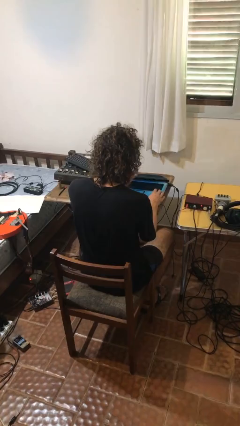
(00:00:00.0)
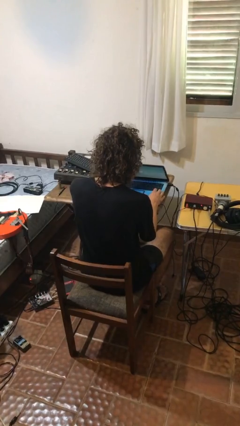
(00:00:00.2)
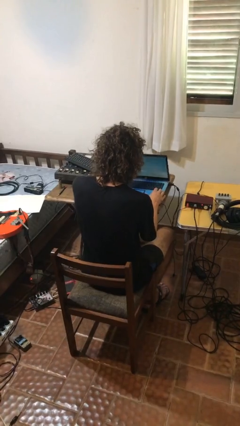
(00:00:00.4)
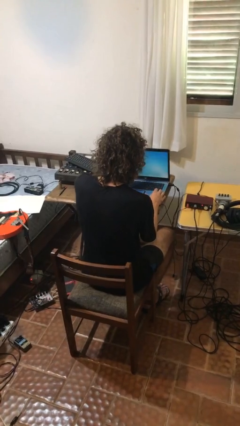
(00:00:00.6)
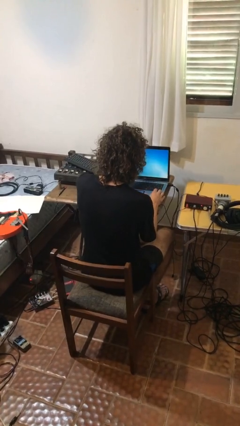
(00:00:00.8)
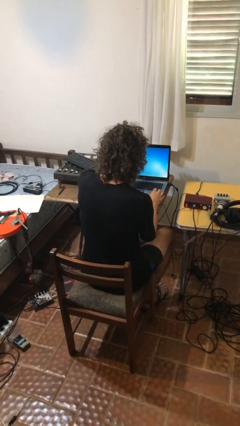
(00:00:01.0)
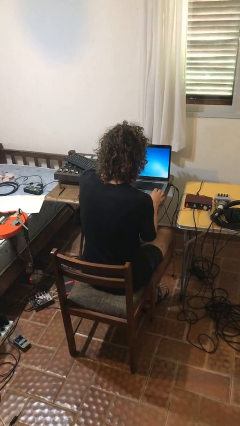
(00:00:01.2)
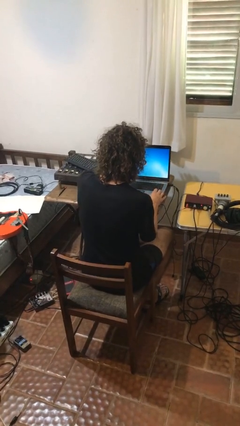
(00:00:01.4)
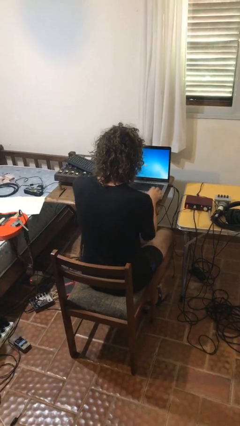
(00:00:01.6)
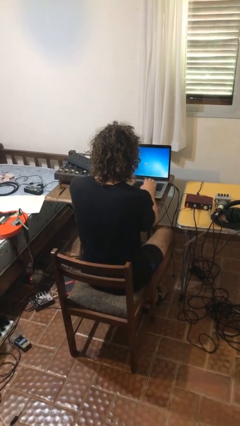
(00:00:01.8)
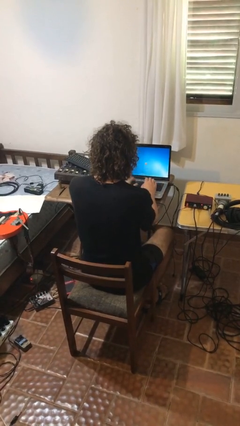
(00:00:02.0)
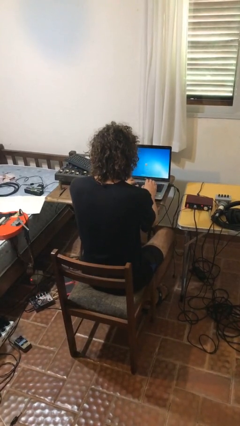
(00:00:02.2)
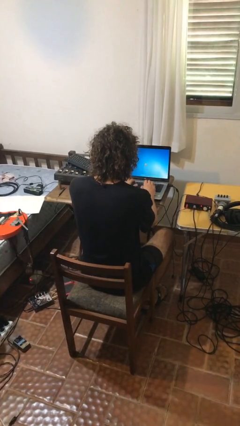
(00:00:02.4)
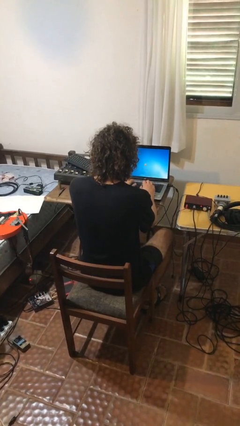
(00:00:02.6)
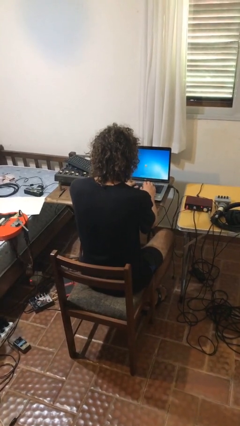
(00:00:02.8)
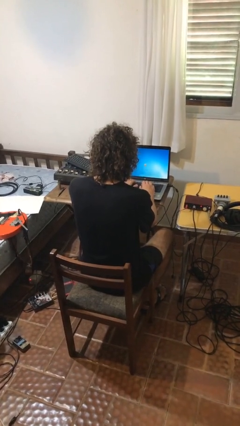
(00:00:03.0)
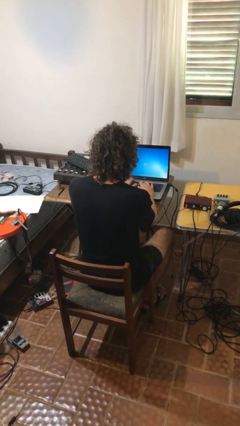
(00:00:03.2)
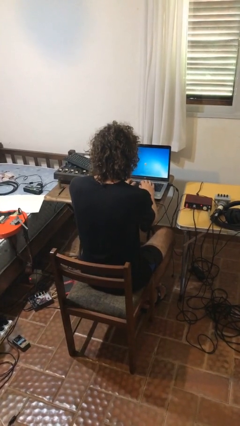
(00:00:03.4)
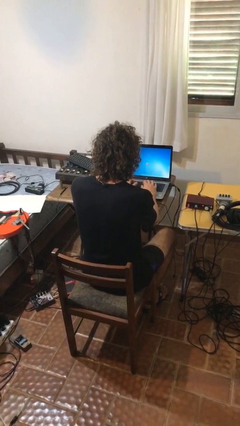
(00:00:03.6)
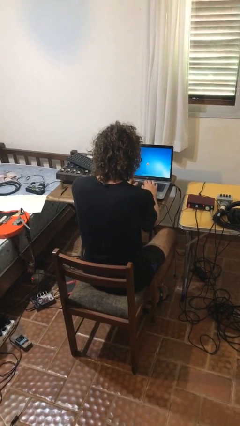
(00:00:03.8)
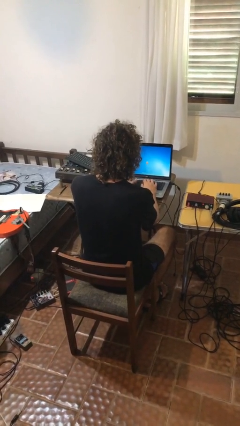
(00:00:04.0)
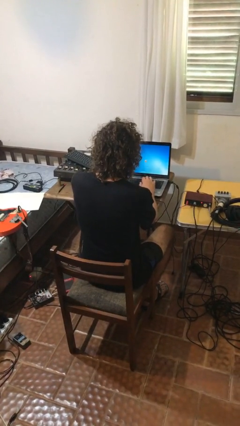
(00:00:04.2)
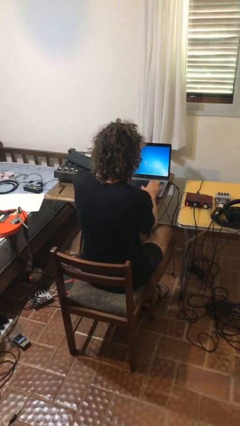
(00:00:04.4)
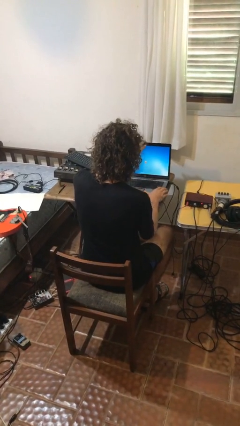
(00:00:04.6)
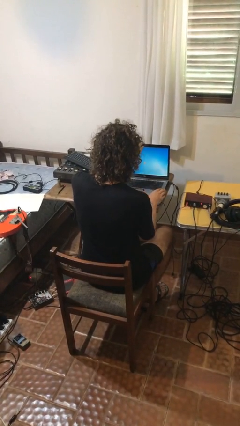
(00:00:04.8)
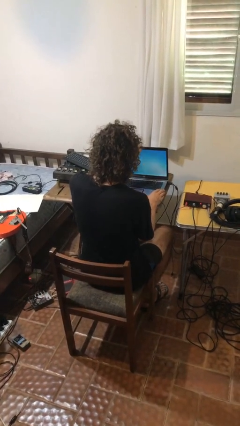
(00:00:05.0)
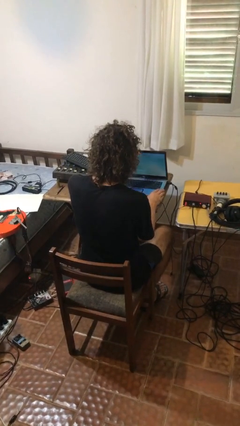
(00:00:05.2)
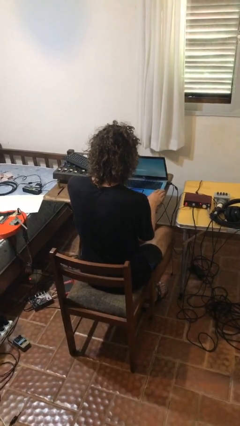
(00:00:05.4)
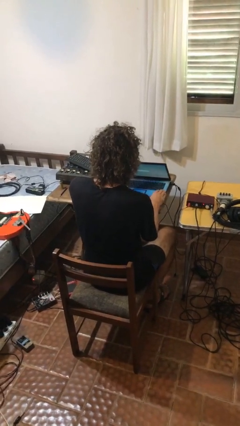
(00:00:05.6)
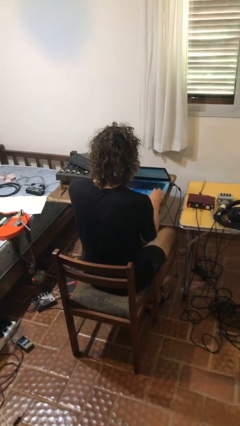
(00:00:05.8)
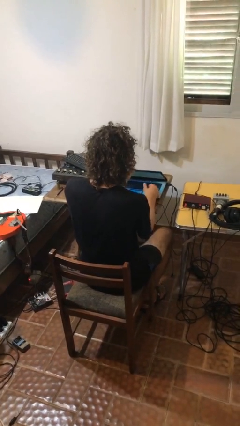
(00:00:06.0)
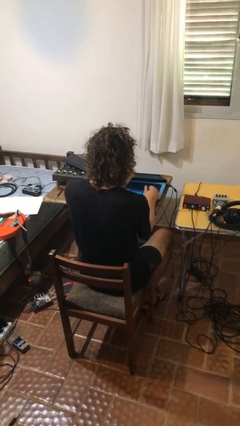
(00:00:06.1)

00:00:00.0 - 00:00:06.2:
person interacts with laptop

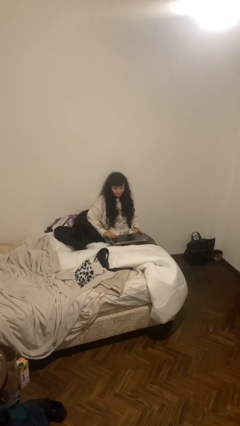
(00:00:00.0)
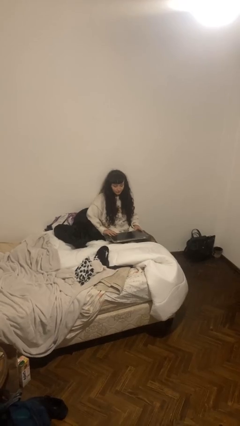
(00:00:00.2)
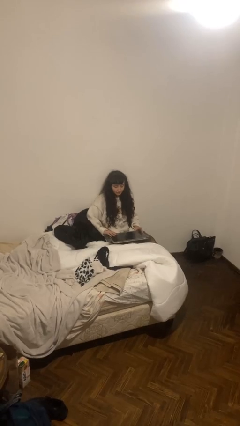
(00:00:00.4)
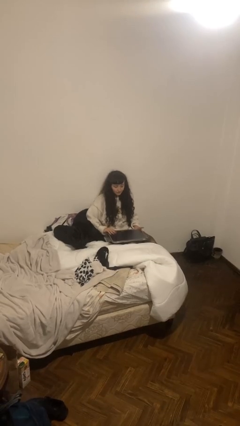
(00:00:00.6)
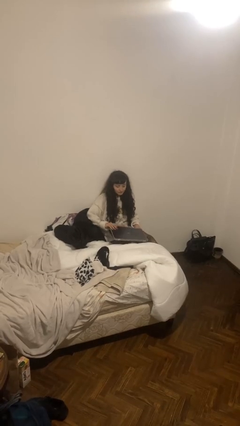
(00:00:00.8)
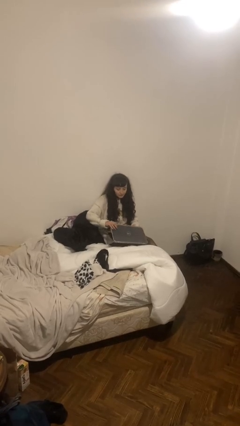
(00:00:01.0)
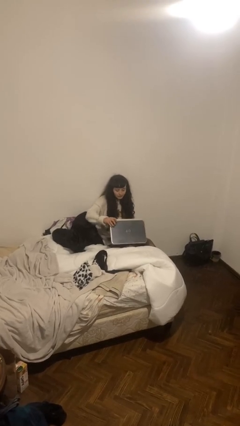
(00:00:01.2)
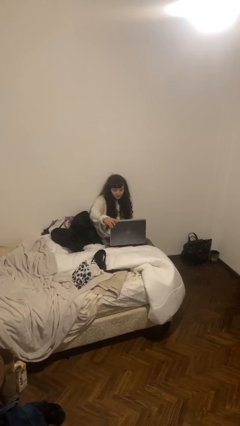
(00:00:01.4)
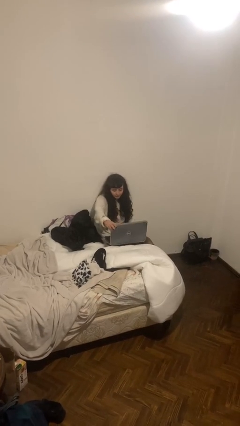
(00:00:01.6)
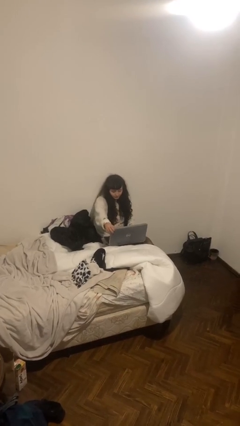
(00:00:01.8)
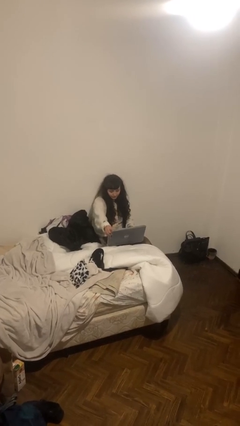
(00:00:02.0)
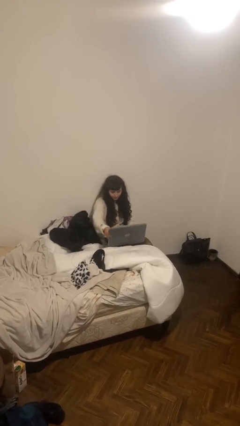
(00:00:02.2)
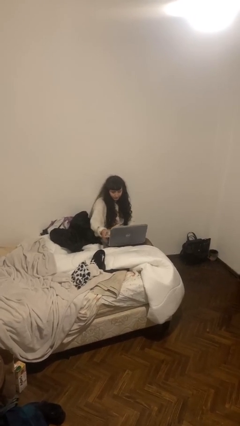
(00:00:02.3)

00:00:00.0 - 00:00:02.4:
person opens laptop

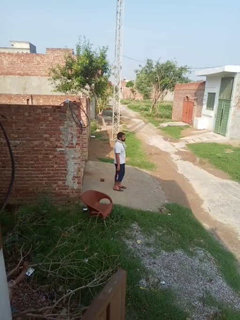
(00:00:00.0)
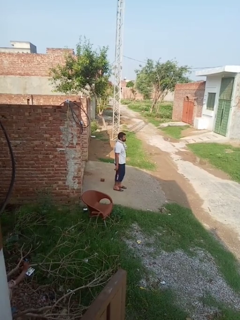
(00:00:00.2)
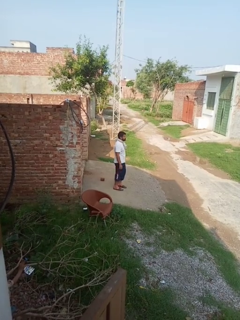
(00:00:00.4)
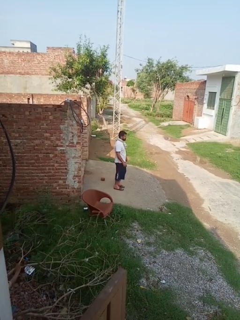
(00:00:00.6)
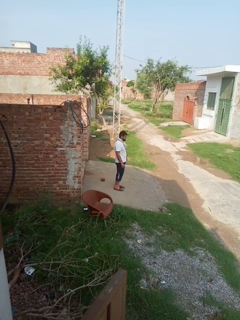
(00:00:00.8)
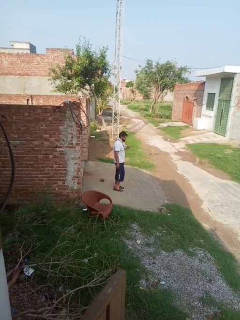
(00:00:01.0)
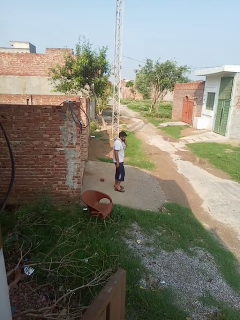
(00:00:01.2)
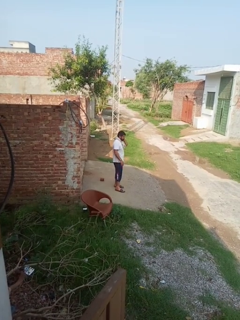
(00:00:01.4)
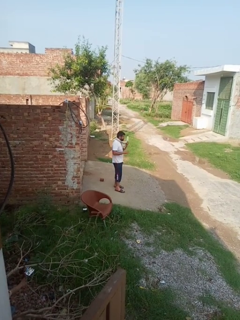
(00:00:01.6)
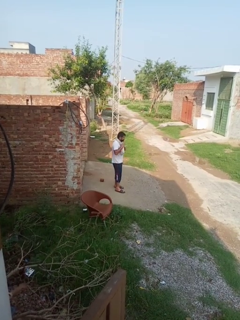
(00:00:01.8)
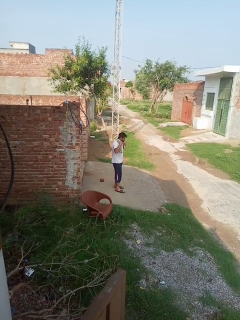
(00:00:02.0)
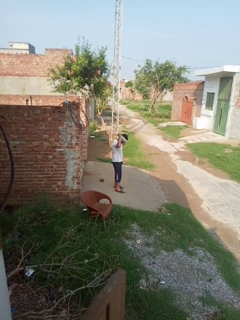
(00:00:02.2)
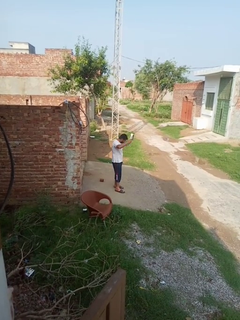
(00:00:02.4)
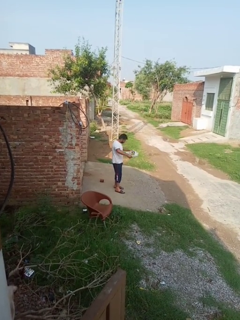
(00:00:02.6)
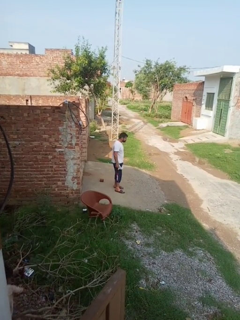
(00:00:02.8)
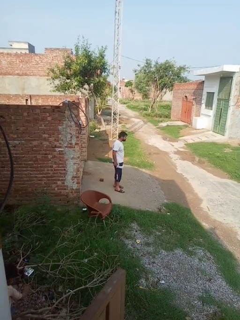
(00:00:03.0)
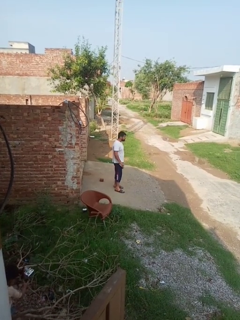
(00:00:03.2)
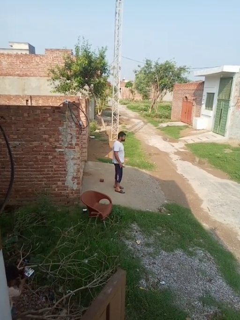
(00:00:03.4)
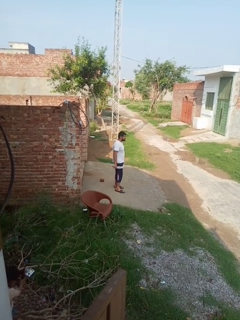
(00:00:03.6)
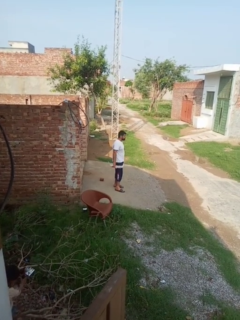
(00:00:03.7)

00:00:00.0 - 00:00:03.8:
person takes off scarf

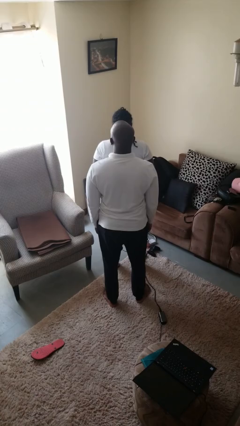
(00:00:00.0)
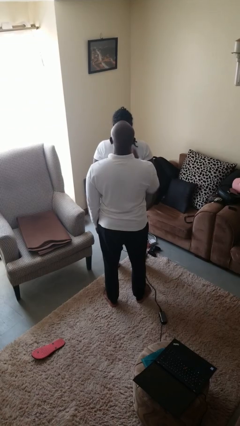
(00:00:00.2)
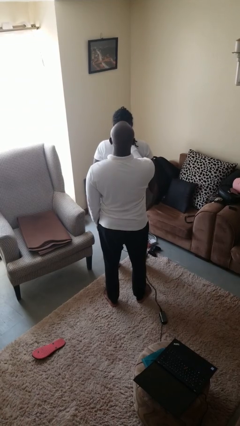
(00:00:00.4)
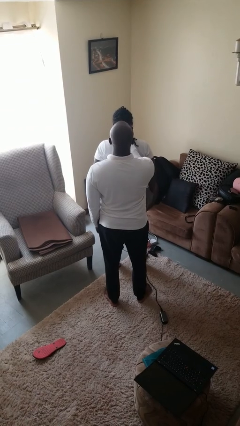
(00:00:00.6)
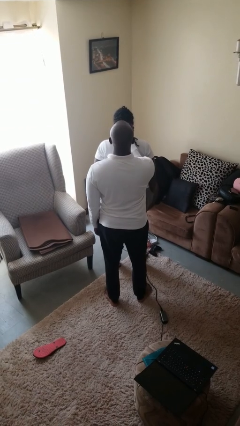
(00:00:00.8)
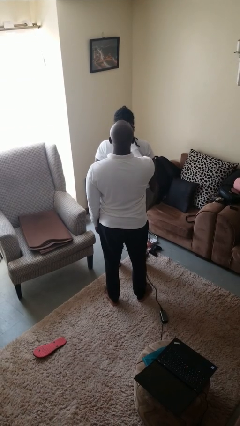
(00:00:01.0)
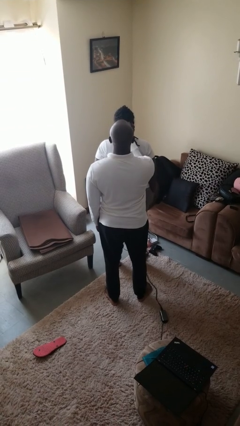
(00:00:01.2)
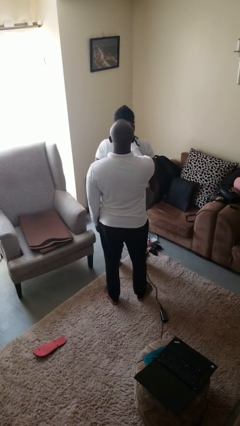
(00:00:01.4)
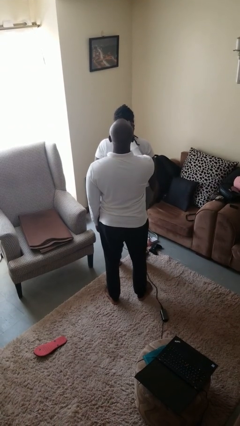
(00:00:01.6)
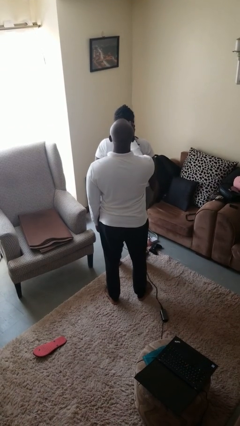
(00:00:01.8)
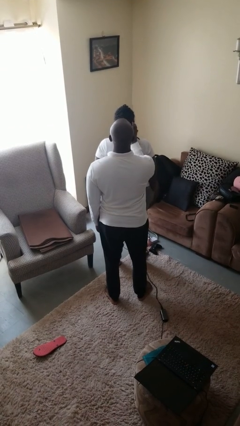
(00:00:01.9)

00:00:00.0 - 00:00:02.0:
person grabs person by hair

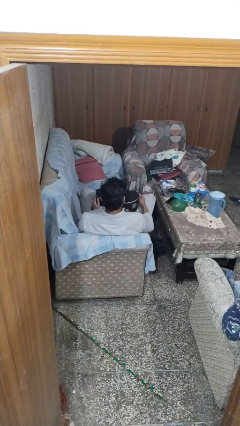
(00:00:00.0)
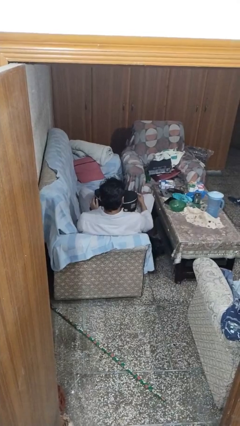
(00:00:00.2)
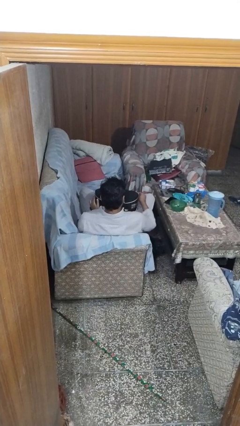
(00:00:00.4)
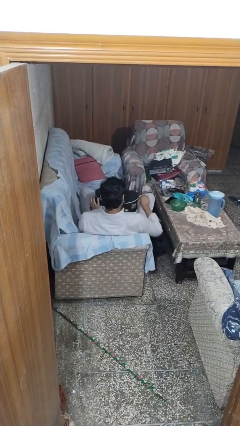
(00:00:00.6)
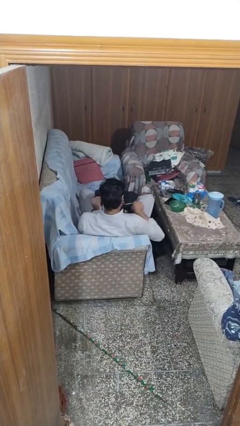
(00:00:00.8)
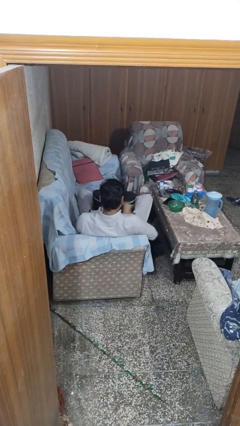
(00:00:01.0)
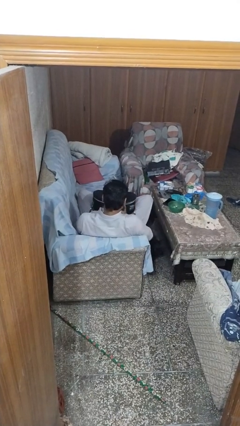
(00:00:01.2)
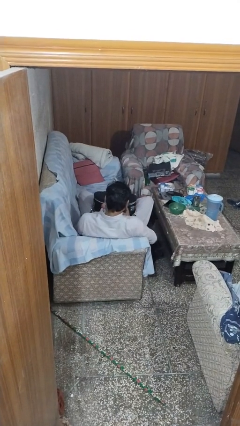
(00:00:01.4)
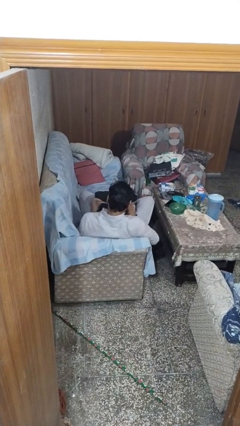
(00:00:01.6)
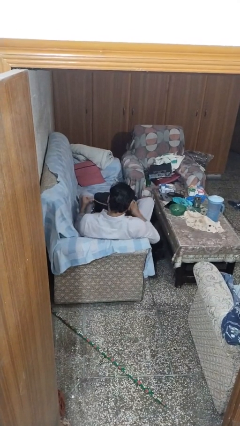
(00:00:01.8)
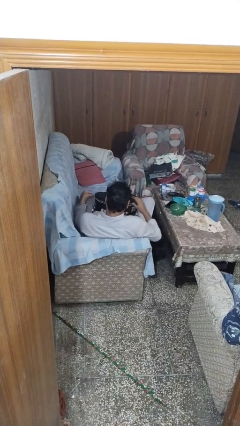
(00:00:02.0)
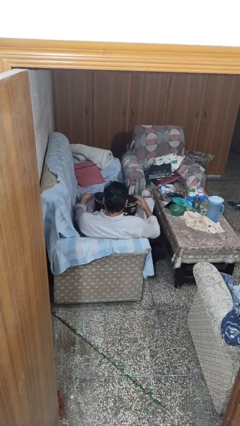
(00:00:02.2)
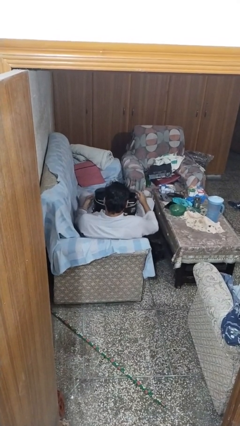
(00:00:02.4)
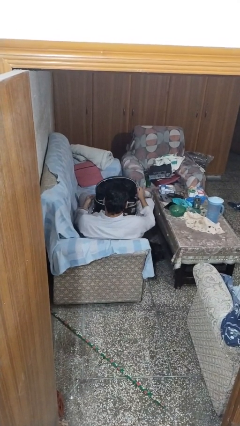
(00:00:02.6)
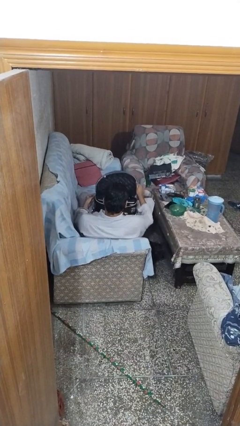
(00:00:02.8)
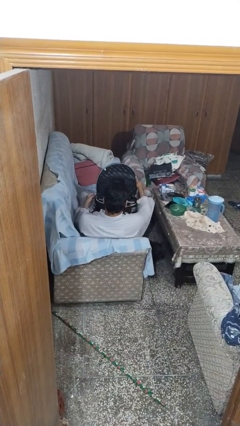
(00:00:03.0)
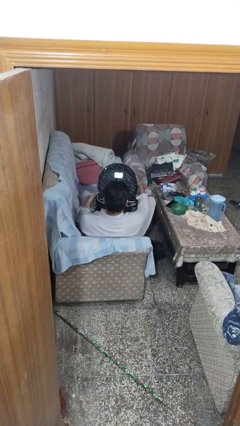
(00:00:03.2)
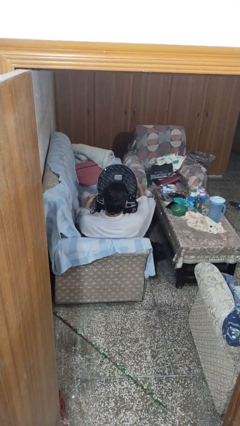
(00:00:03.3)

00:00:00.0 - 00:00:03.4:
person opens suitcase
